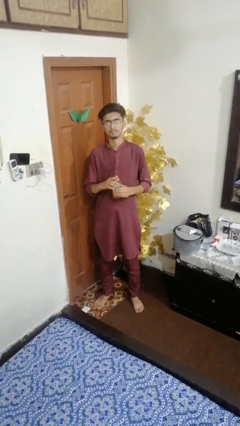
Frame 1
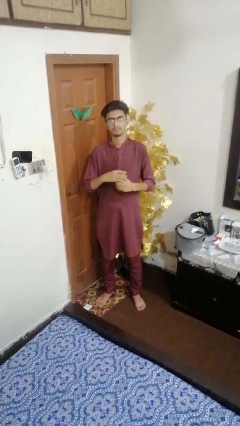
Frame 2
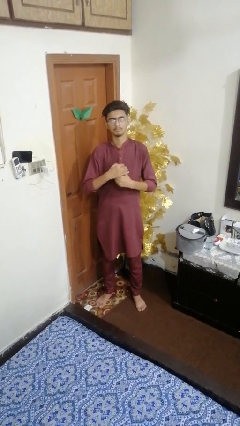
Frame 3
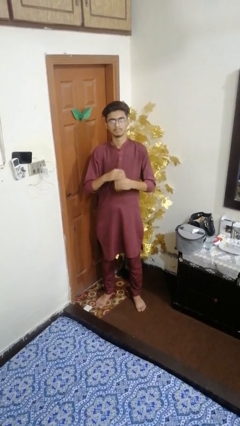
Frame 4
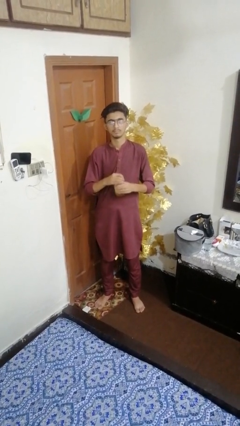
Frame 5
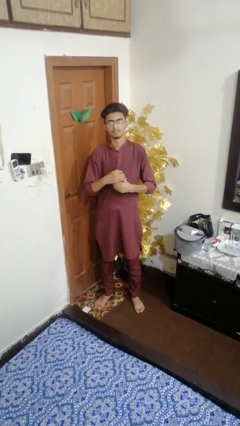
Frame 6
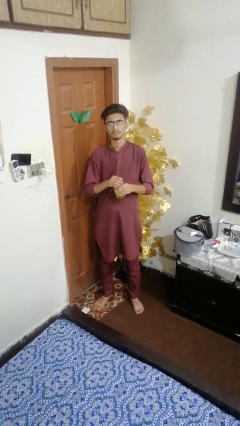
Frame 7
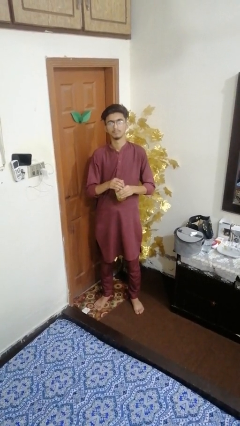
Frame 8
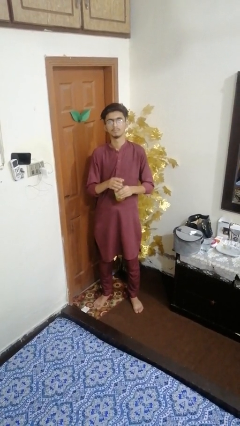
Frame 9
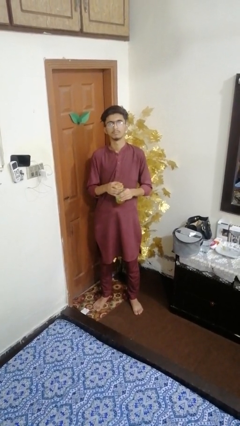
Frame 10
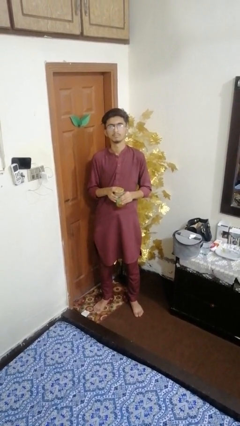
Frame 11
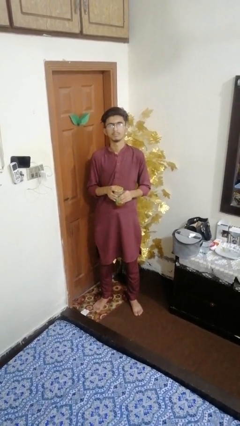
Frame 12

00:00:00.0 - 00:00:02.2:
person closes jar

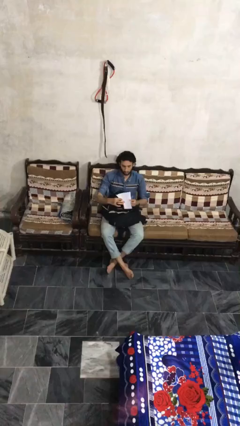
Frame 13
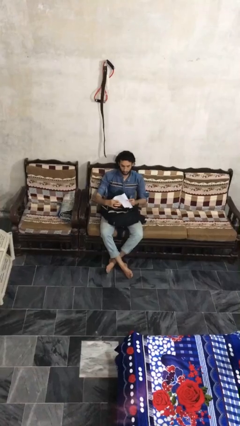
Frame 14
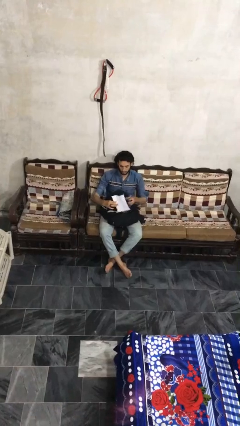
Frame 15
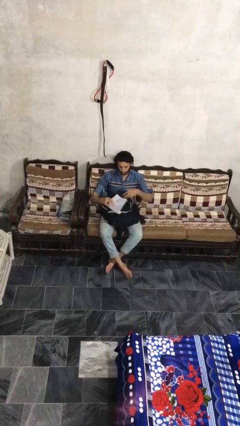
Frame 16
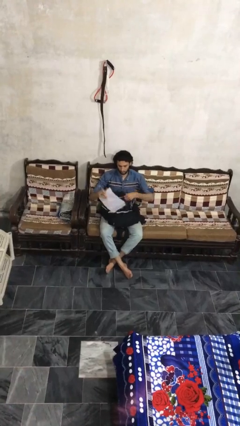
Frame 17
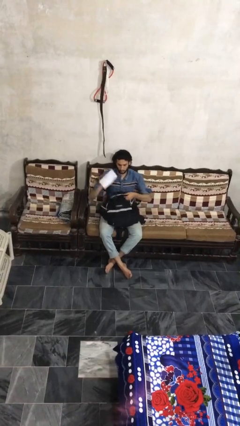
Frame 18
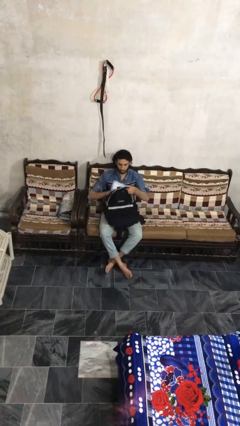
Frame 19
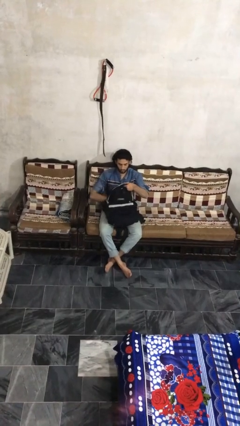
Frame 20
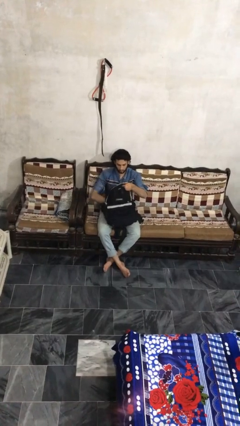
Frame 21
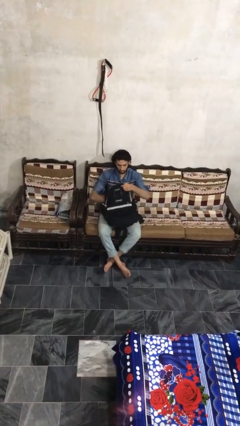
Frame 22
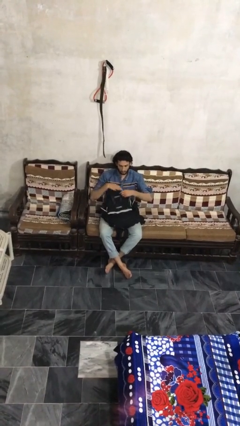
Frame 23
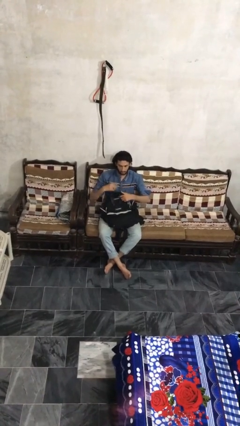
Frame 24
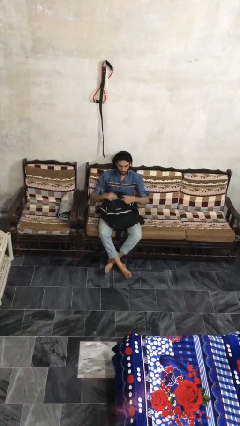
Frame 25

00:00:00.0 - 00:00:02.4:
person puts object into backpack

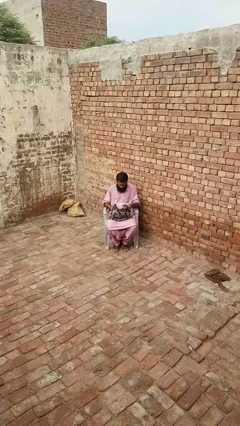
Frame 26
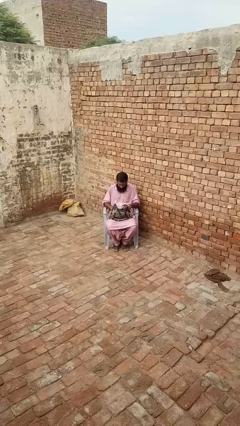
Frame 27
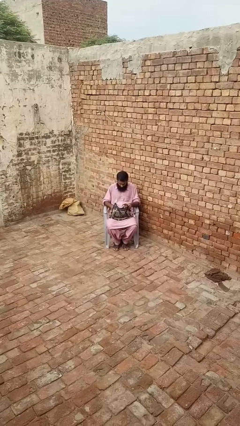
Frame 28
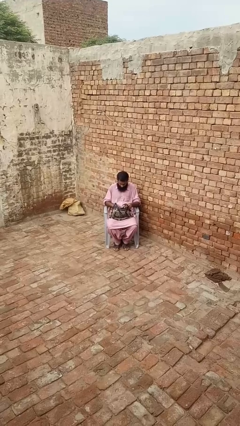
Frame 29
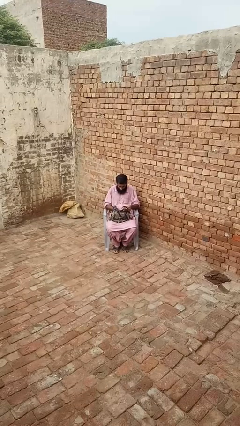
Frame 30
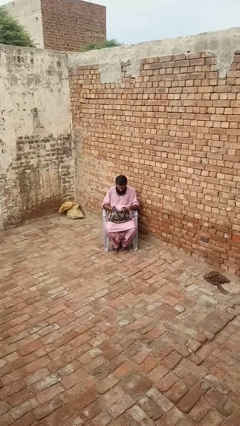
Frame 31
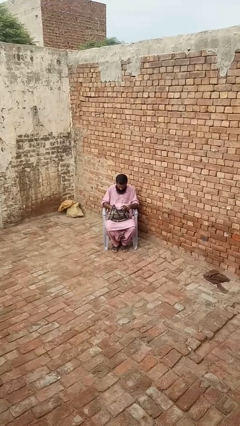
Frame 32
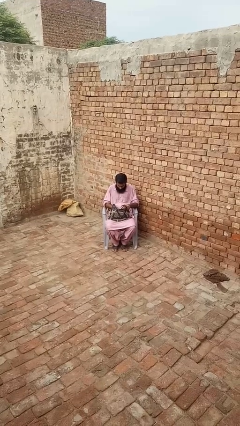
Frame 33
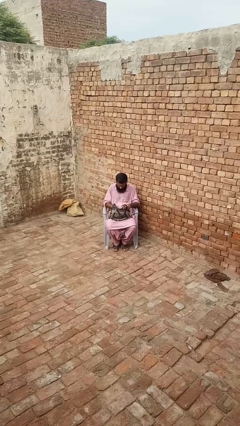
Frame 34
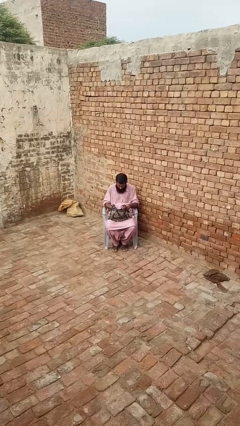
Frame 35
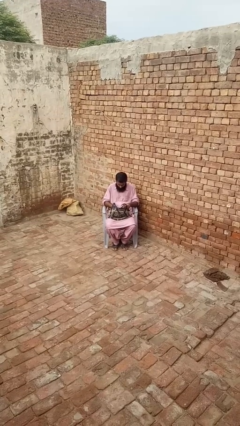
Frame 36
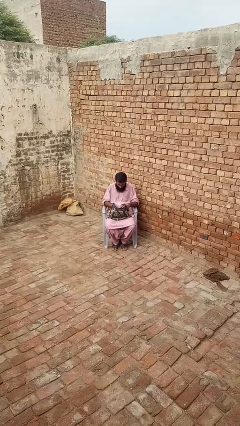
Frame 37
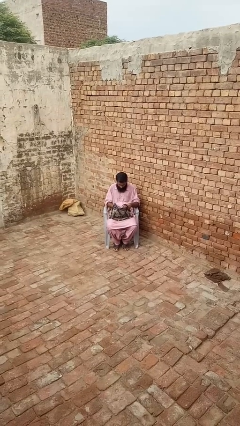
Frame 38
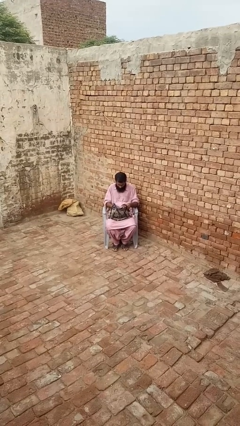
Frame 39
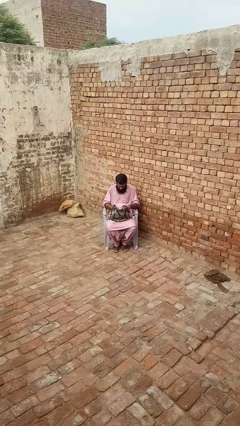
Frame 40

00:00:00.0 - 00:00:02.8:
person searches in purse

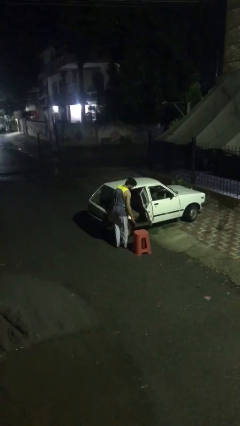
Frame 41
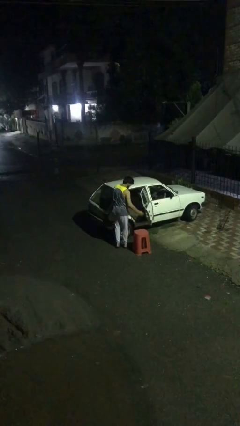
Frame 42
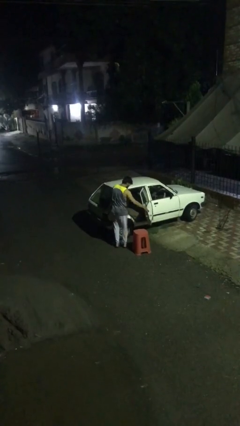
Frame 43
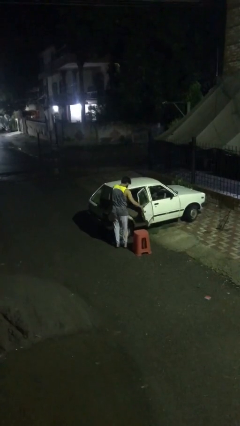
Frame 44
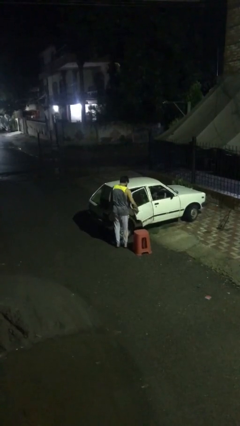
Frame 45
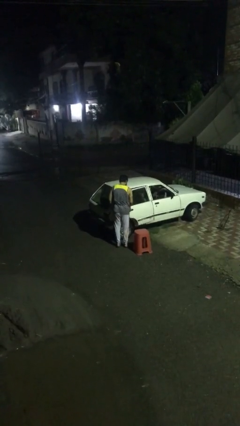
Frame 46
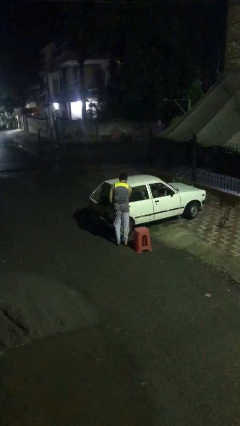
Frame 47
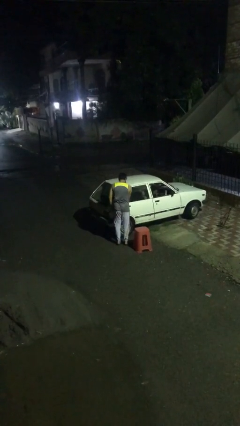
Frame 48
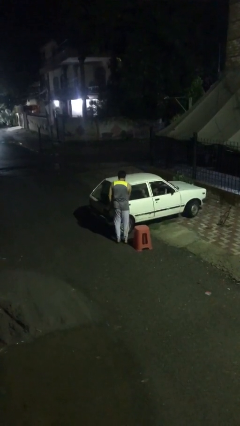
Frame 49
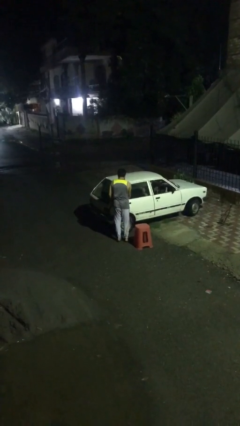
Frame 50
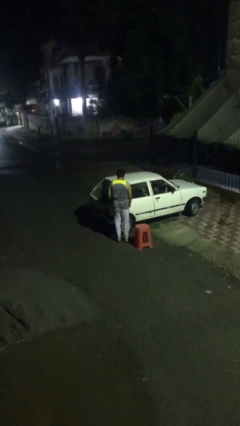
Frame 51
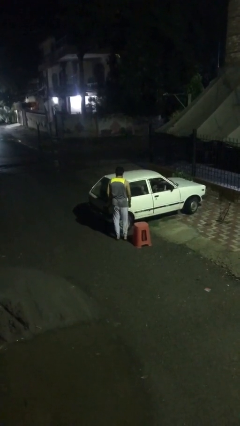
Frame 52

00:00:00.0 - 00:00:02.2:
person closes car door

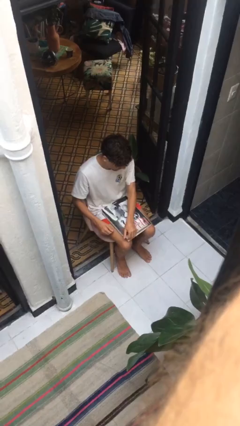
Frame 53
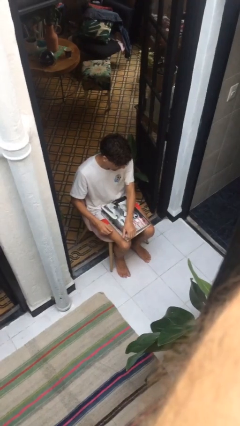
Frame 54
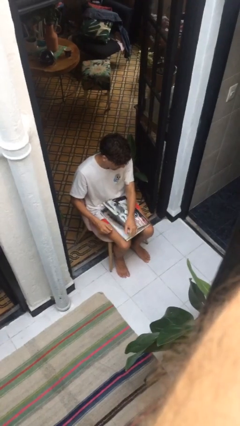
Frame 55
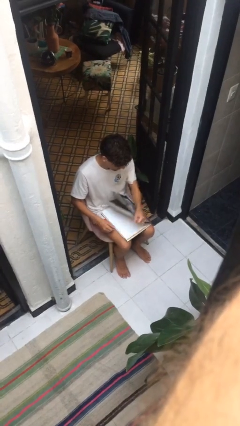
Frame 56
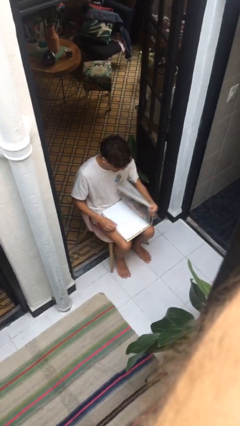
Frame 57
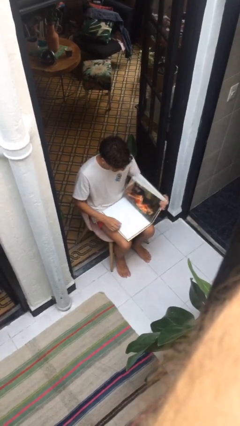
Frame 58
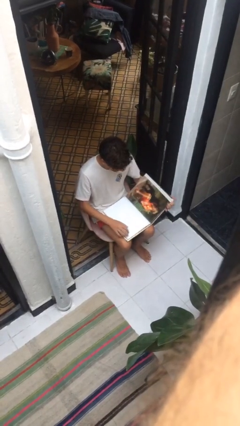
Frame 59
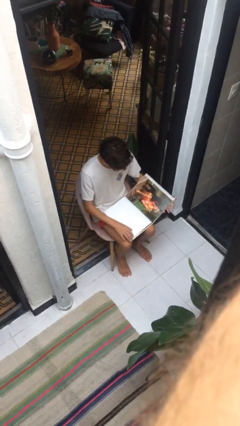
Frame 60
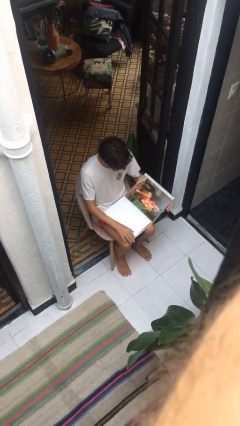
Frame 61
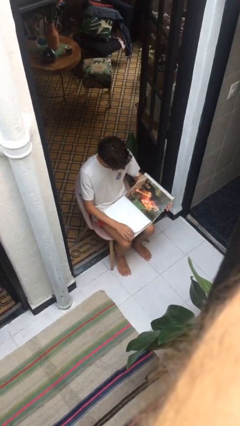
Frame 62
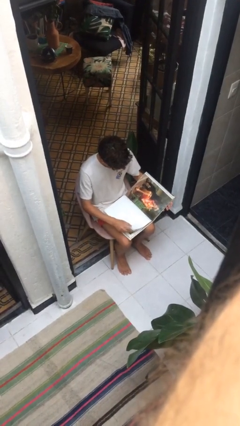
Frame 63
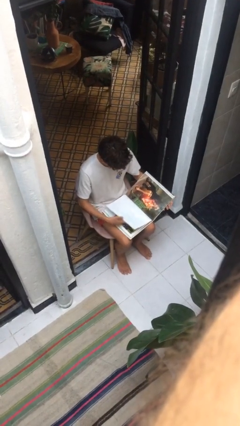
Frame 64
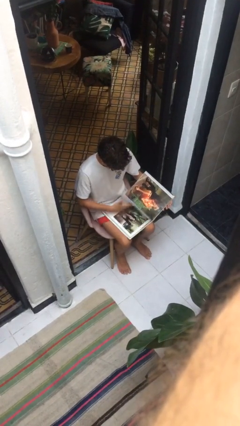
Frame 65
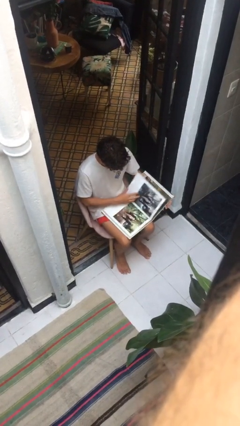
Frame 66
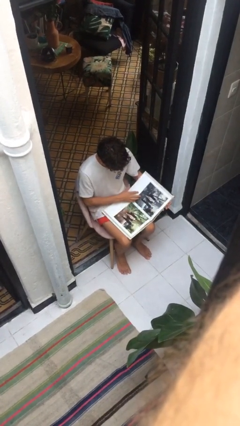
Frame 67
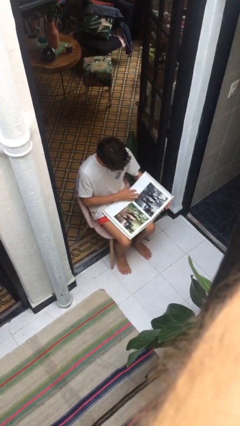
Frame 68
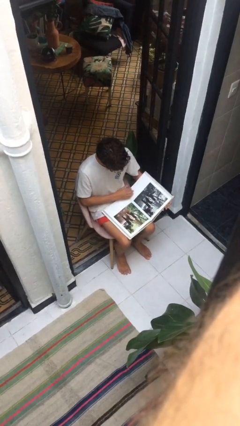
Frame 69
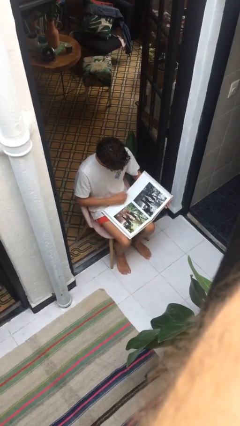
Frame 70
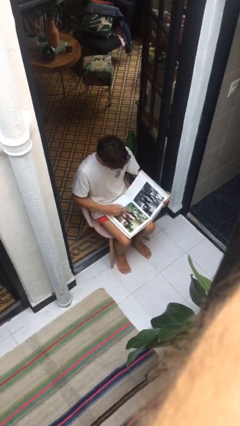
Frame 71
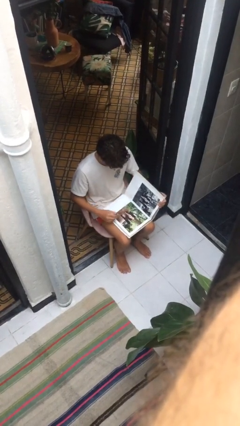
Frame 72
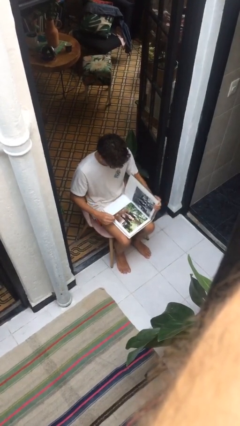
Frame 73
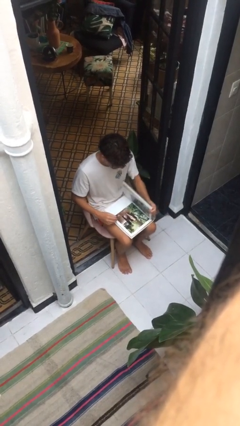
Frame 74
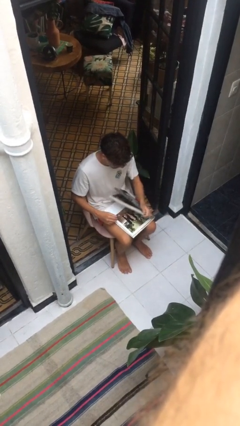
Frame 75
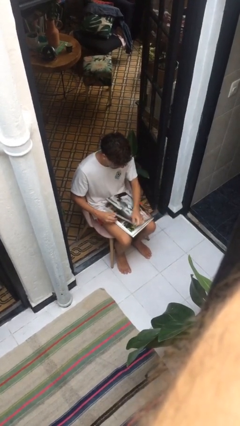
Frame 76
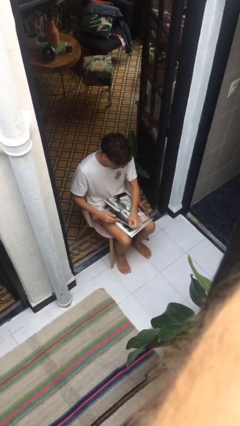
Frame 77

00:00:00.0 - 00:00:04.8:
person reads document

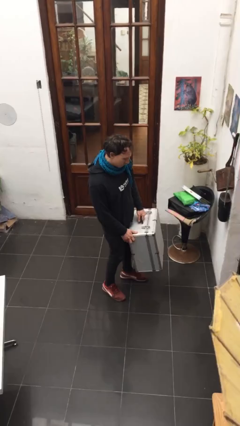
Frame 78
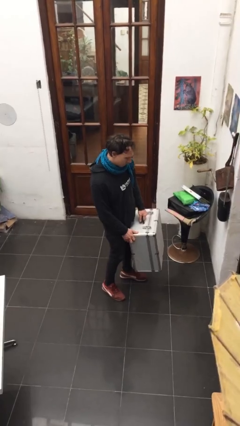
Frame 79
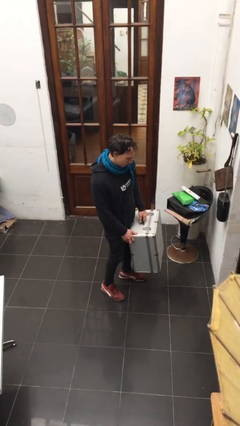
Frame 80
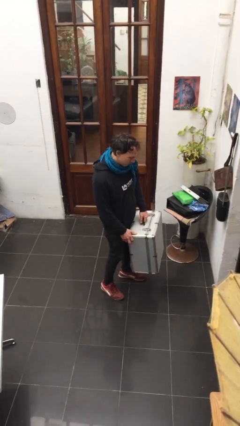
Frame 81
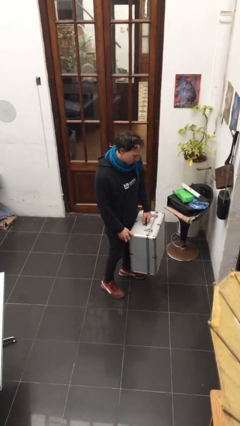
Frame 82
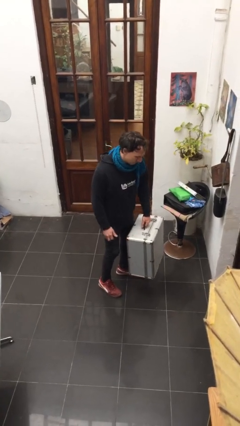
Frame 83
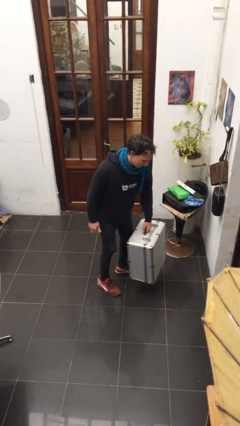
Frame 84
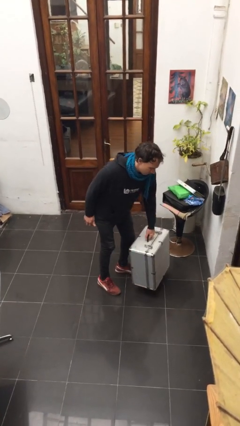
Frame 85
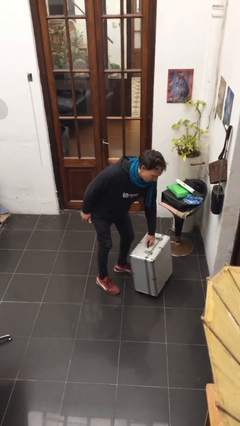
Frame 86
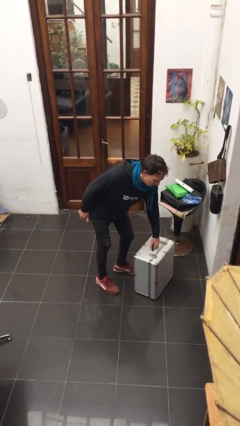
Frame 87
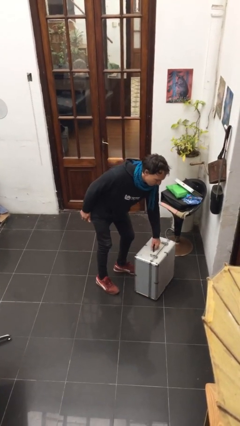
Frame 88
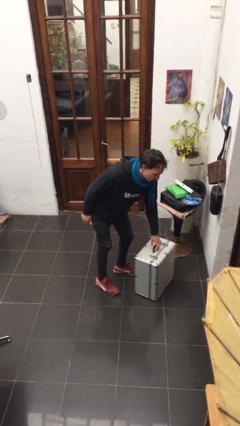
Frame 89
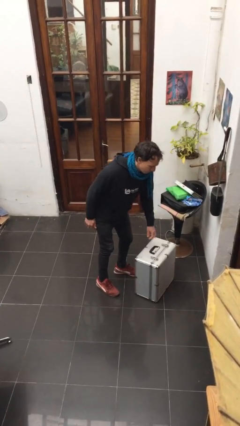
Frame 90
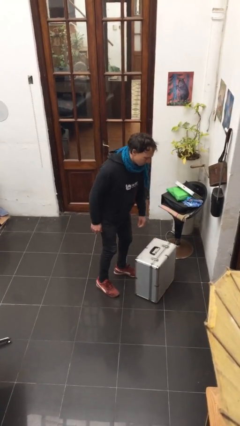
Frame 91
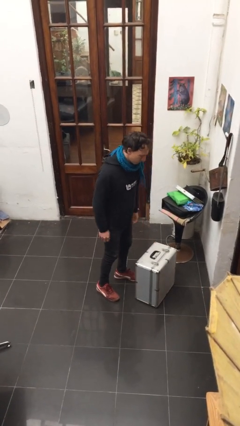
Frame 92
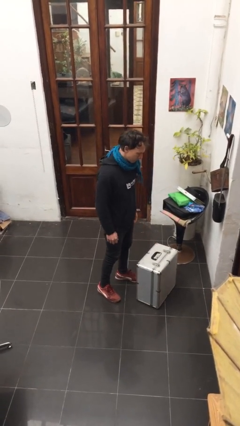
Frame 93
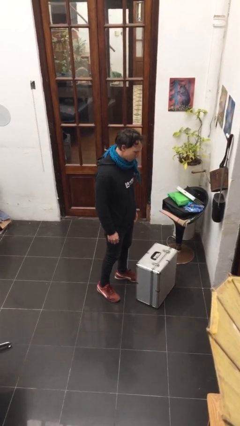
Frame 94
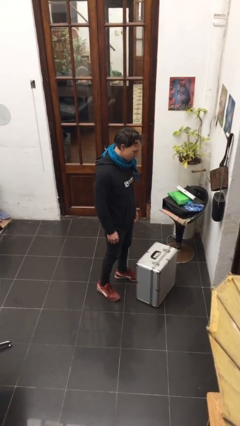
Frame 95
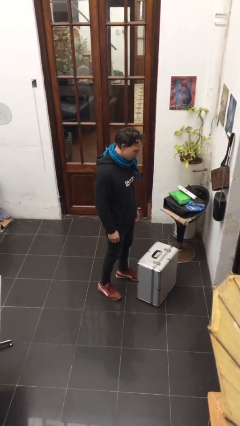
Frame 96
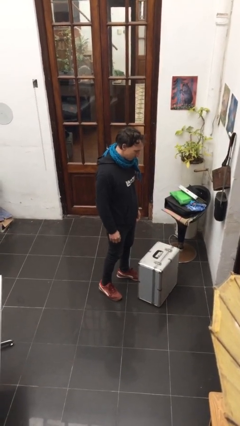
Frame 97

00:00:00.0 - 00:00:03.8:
person puts down object on floor
